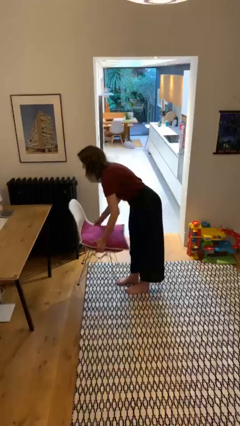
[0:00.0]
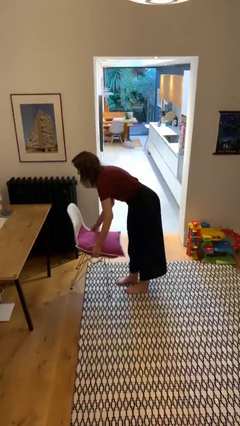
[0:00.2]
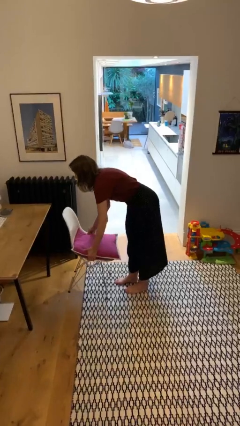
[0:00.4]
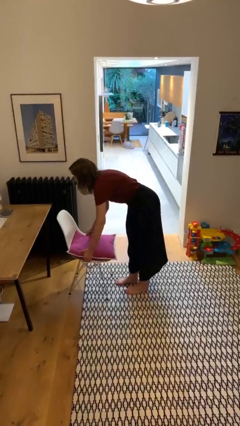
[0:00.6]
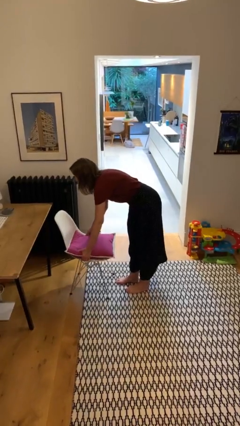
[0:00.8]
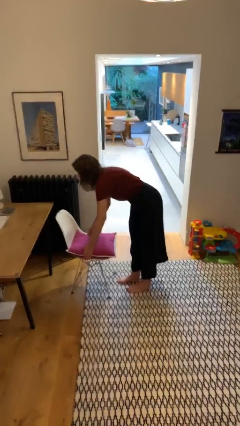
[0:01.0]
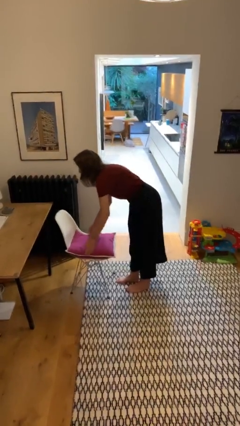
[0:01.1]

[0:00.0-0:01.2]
person puts down object on floor

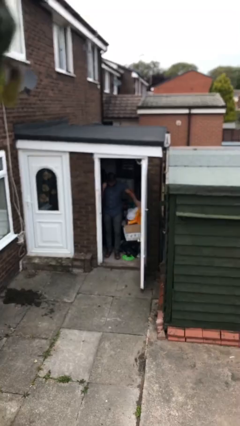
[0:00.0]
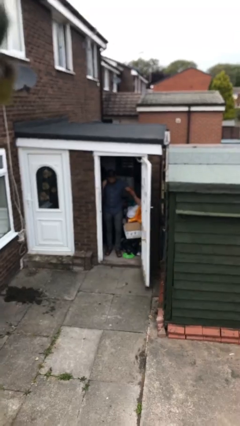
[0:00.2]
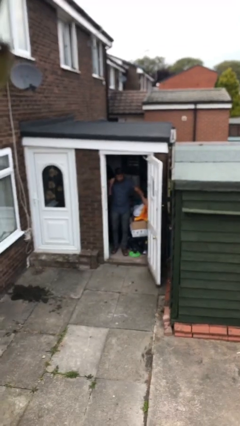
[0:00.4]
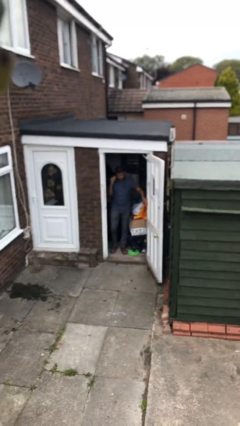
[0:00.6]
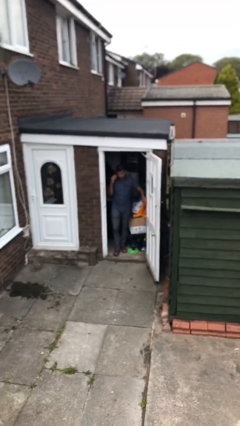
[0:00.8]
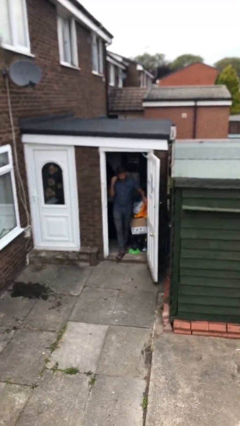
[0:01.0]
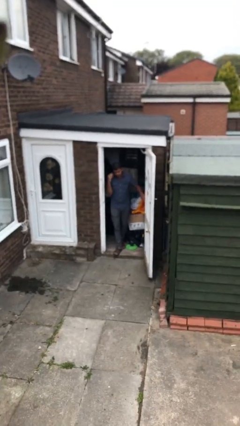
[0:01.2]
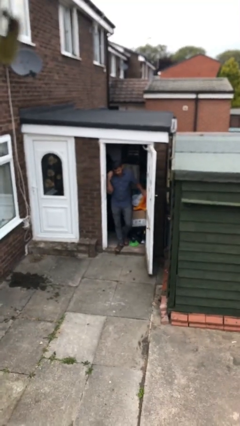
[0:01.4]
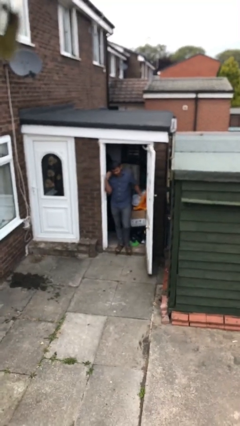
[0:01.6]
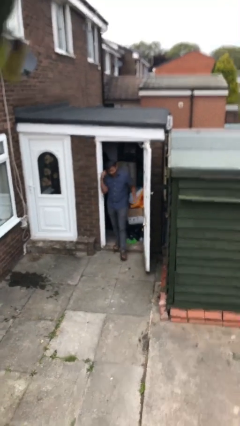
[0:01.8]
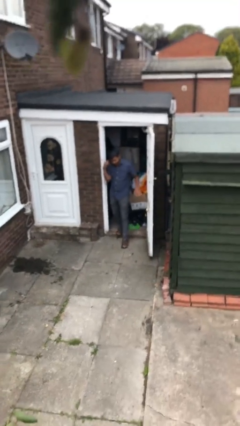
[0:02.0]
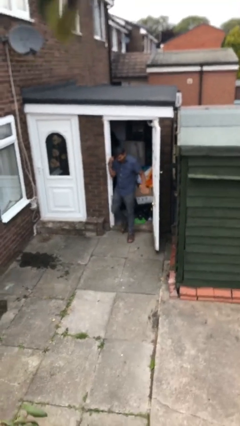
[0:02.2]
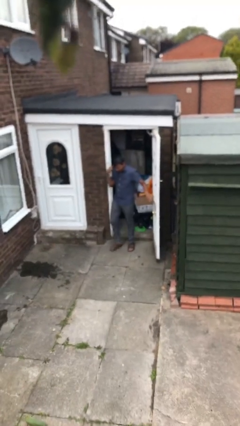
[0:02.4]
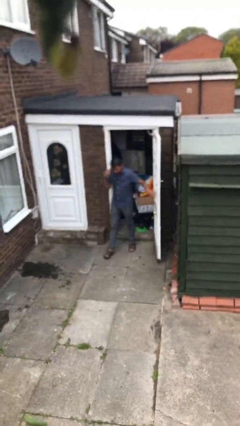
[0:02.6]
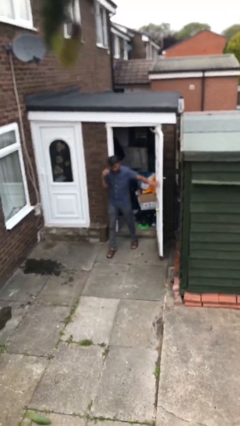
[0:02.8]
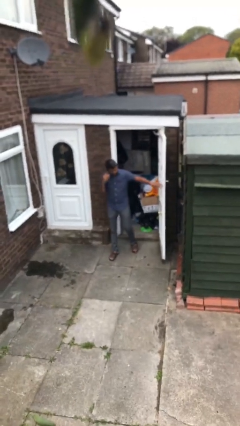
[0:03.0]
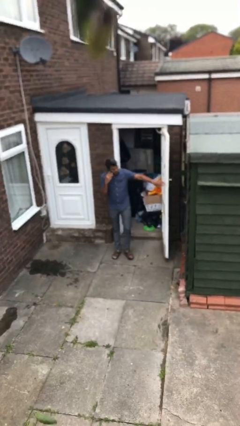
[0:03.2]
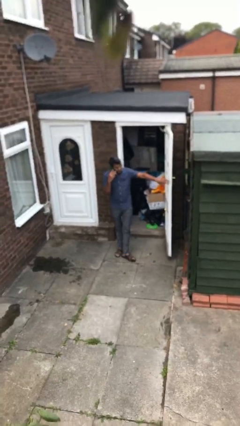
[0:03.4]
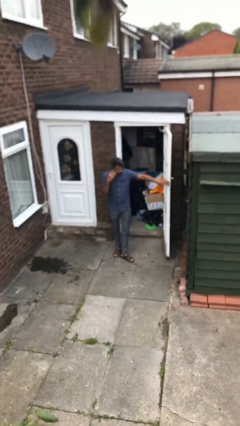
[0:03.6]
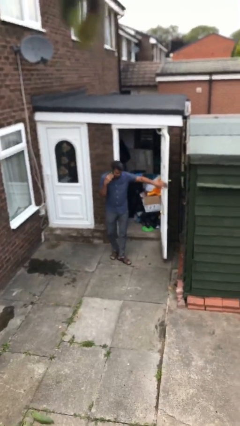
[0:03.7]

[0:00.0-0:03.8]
person enters scene through structure

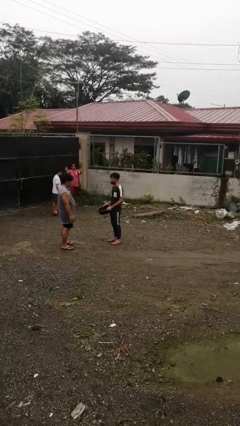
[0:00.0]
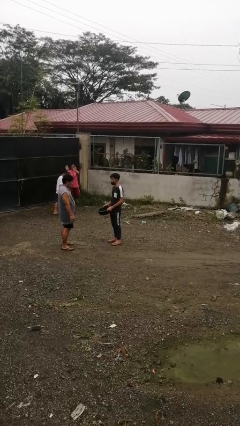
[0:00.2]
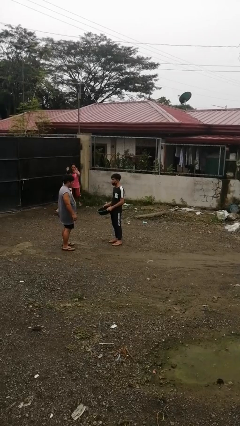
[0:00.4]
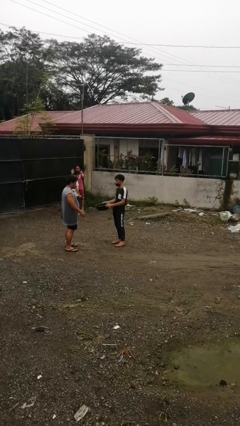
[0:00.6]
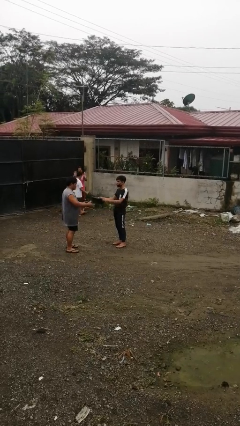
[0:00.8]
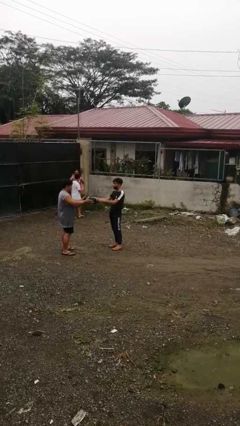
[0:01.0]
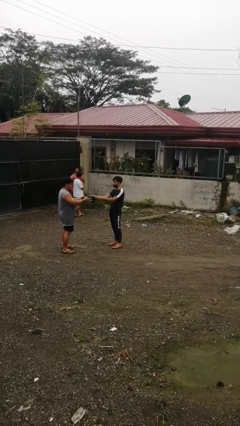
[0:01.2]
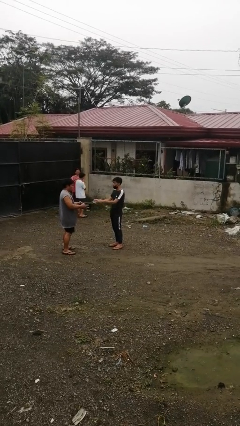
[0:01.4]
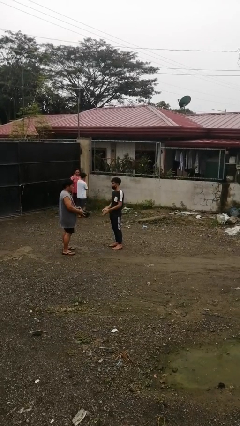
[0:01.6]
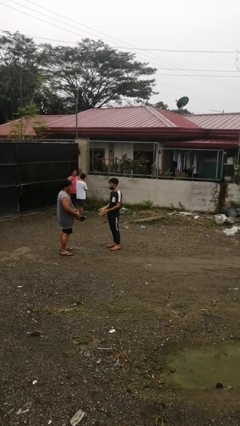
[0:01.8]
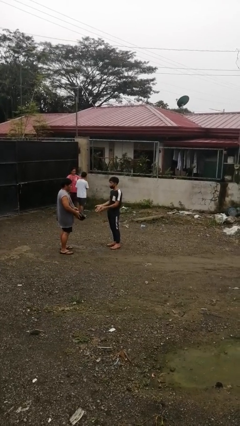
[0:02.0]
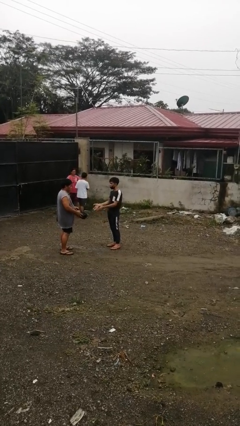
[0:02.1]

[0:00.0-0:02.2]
person transfers object to person

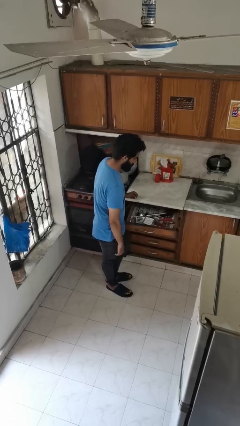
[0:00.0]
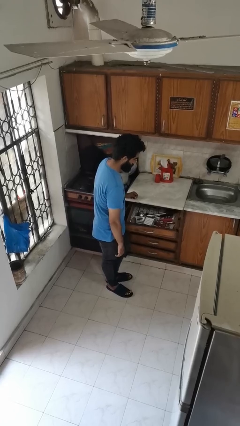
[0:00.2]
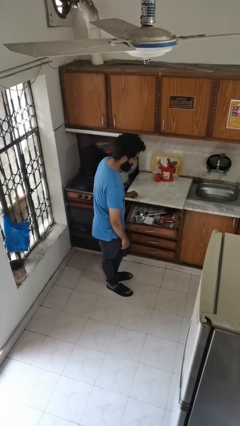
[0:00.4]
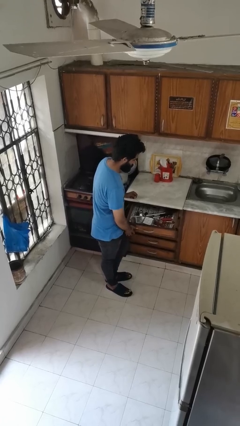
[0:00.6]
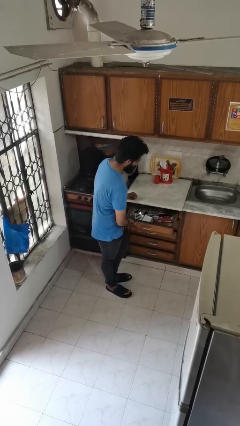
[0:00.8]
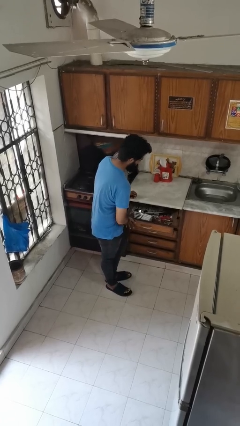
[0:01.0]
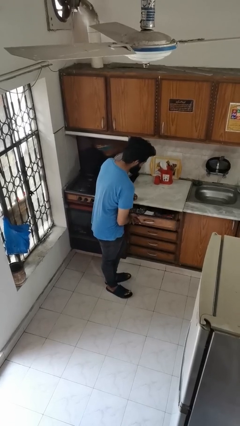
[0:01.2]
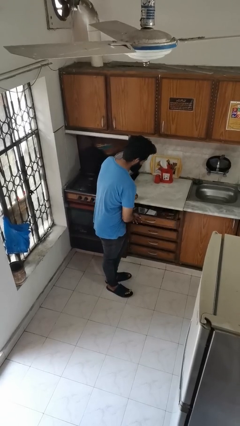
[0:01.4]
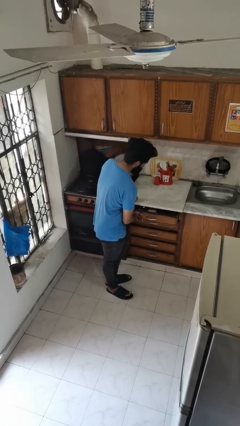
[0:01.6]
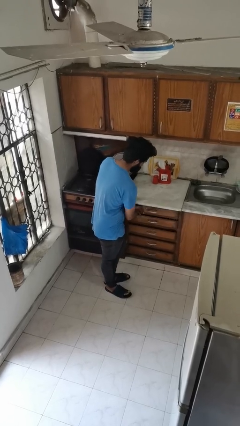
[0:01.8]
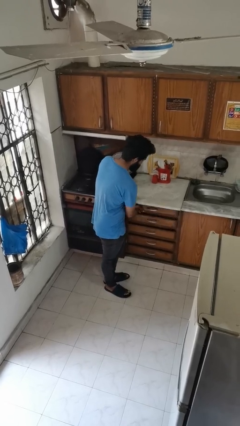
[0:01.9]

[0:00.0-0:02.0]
person closes kitchen drawer

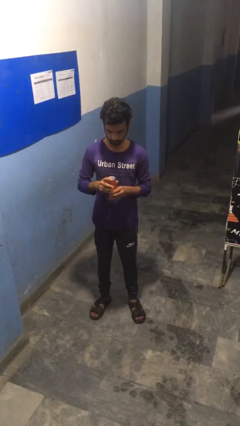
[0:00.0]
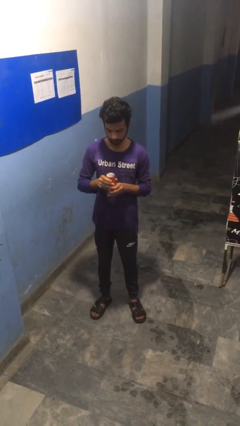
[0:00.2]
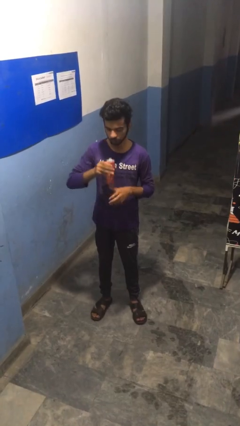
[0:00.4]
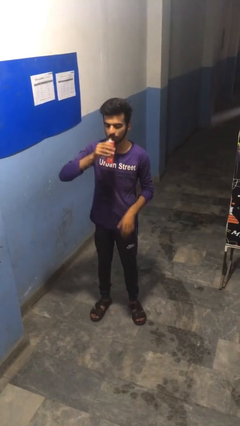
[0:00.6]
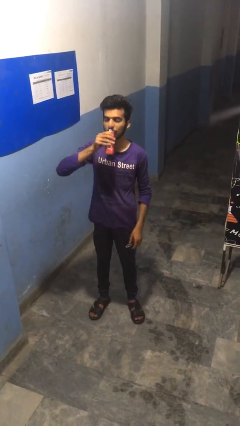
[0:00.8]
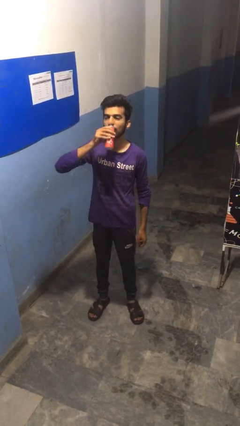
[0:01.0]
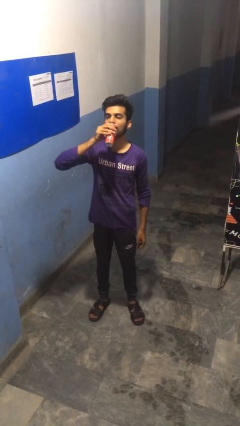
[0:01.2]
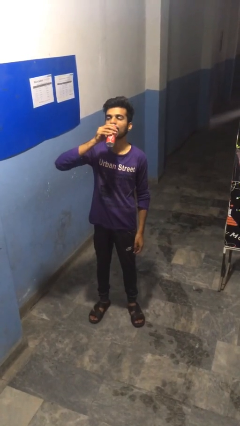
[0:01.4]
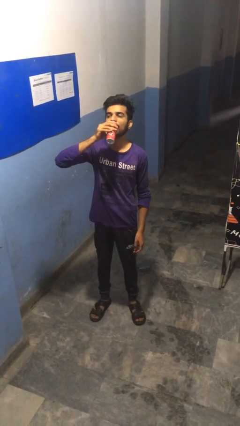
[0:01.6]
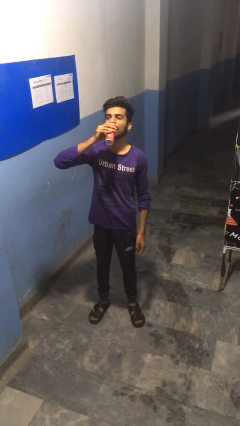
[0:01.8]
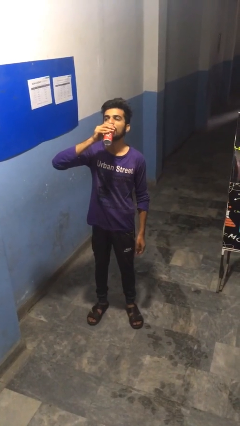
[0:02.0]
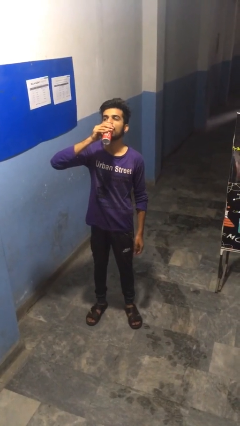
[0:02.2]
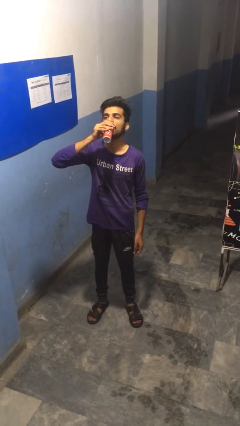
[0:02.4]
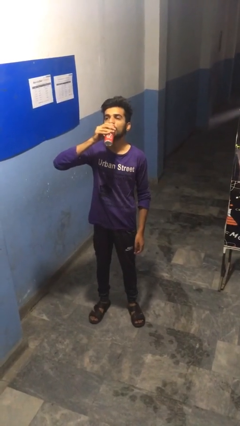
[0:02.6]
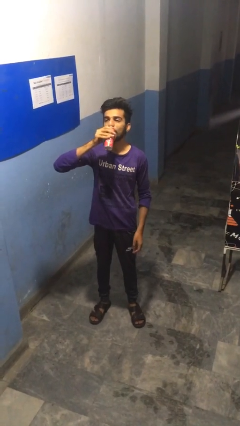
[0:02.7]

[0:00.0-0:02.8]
person drinks from beverage can

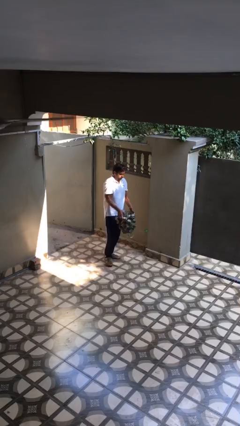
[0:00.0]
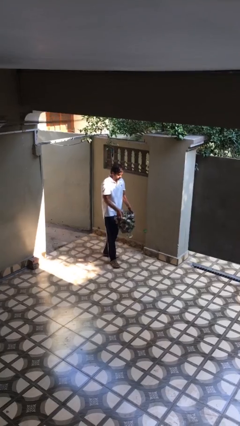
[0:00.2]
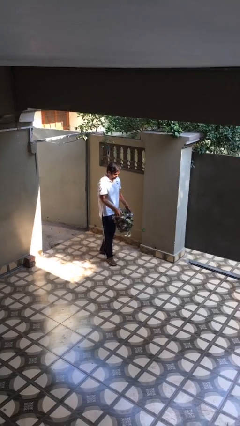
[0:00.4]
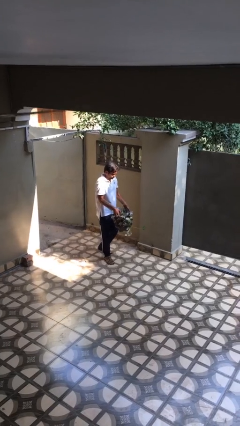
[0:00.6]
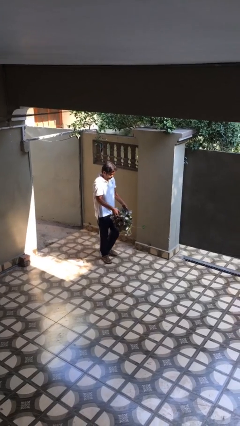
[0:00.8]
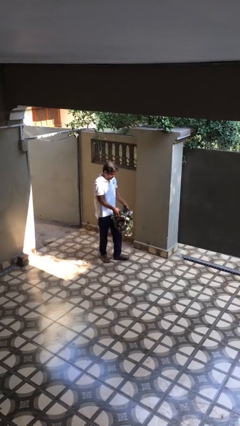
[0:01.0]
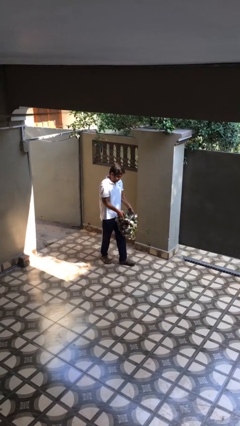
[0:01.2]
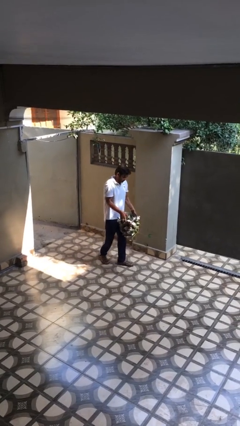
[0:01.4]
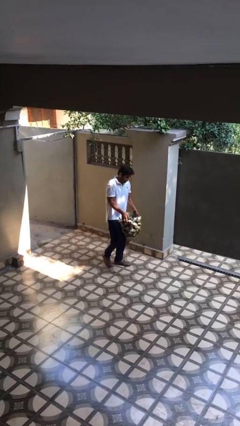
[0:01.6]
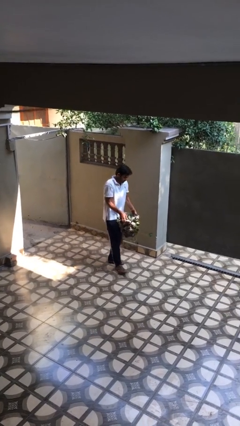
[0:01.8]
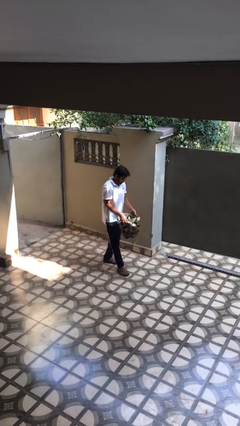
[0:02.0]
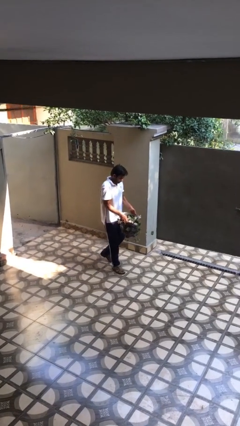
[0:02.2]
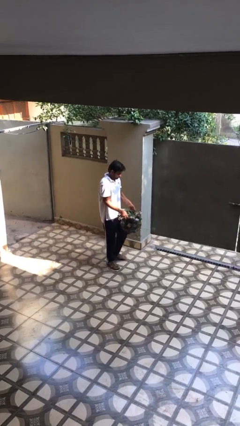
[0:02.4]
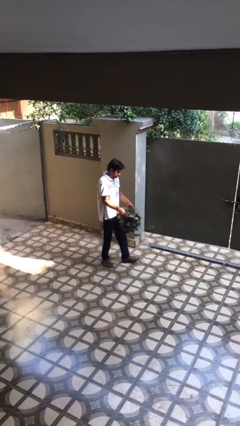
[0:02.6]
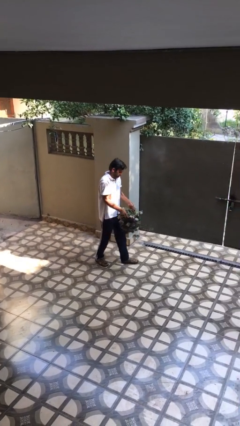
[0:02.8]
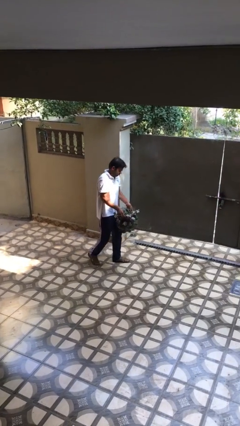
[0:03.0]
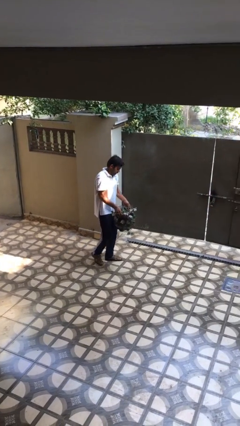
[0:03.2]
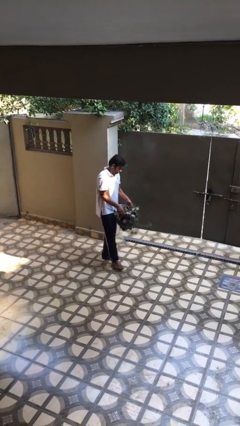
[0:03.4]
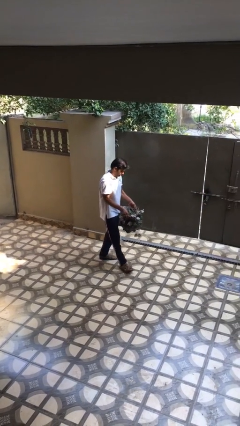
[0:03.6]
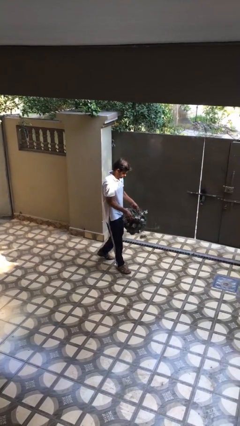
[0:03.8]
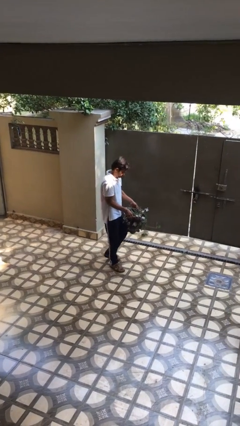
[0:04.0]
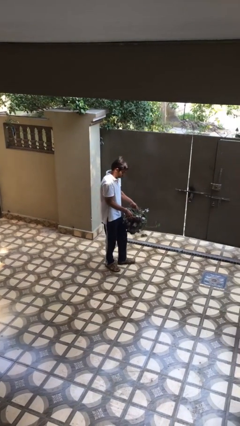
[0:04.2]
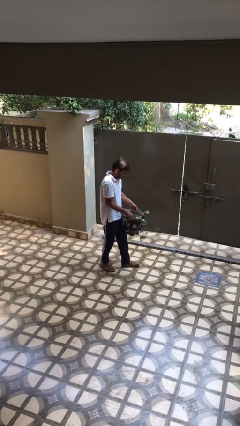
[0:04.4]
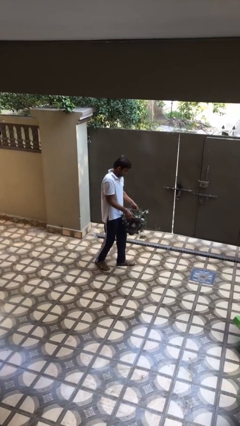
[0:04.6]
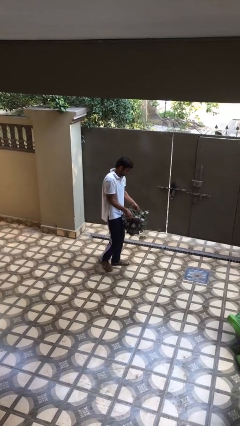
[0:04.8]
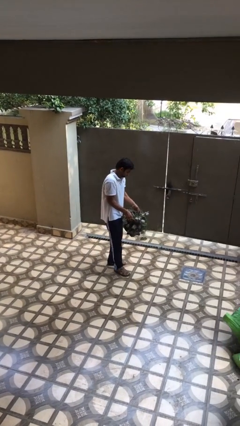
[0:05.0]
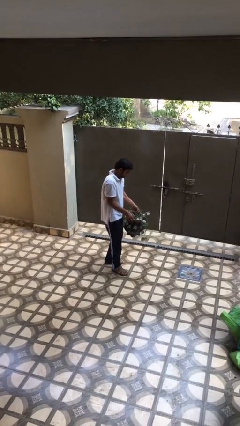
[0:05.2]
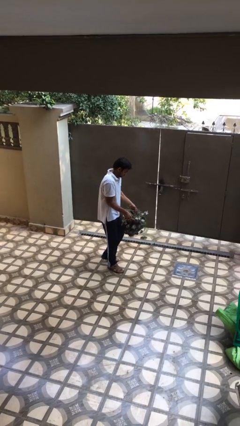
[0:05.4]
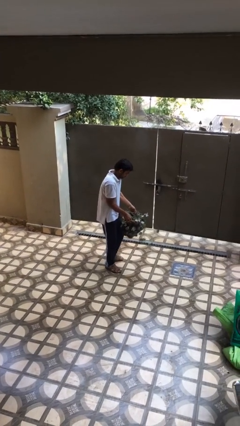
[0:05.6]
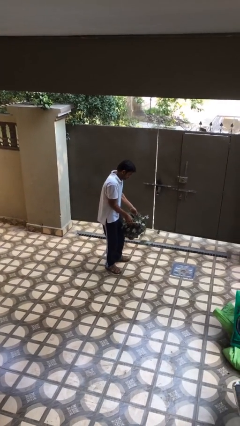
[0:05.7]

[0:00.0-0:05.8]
person carries heavy object
